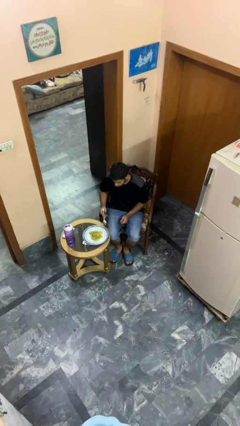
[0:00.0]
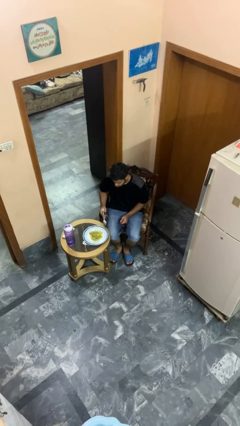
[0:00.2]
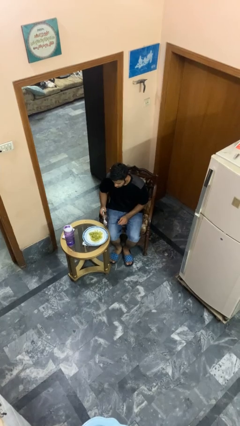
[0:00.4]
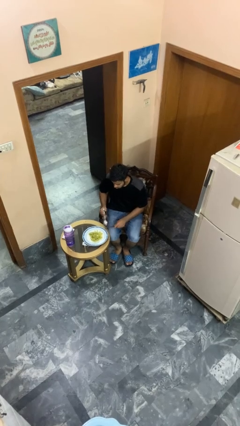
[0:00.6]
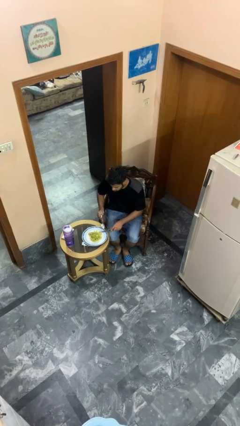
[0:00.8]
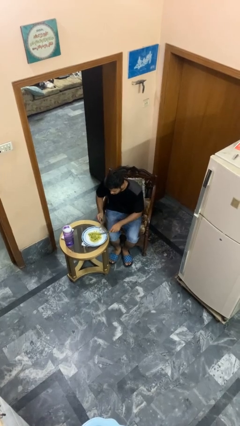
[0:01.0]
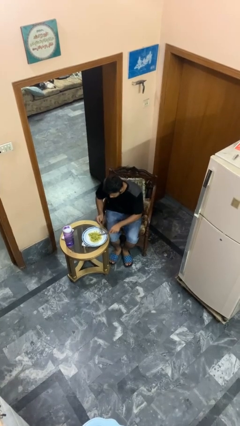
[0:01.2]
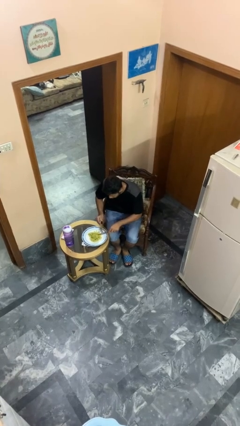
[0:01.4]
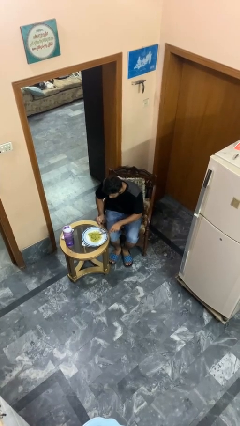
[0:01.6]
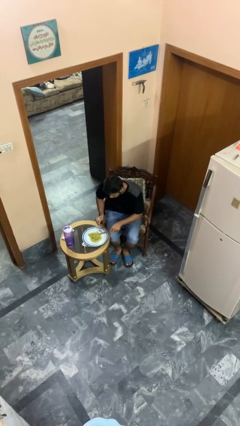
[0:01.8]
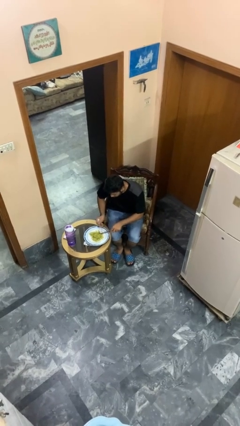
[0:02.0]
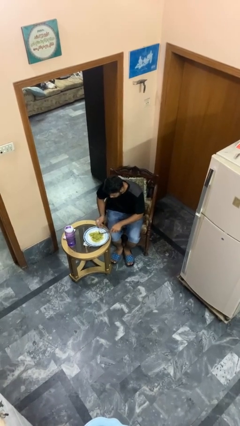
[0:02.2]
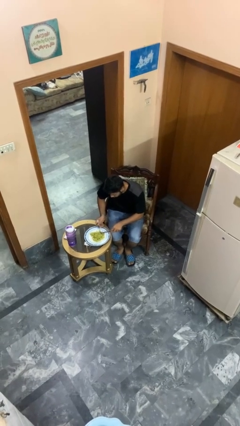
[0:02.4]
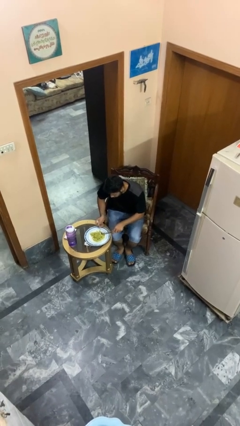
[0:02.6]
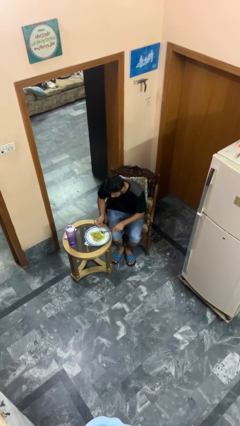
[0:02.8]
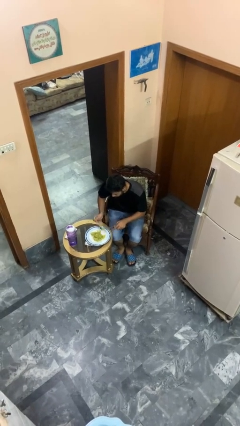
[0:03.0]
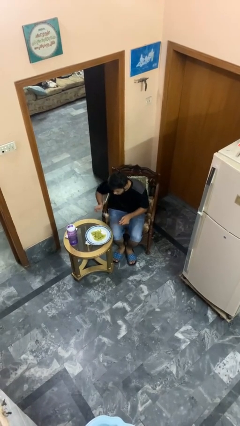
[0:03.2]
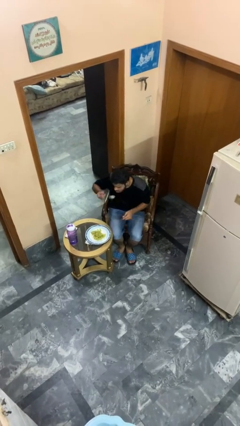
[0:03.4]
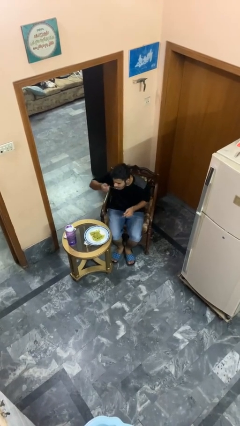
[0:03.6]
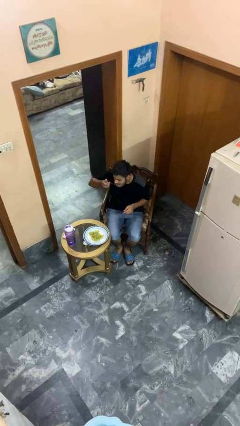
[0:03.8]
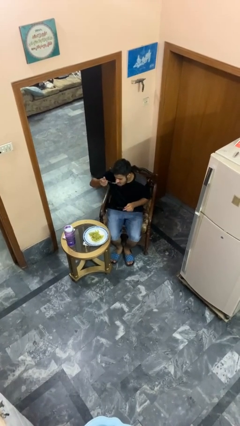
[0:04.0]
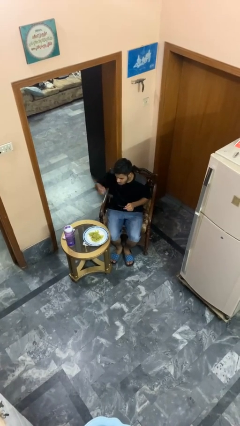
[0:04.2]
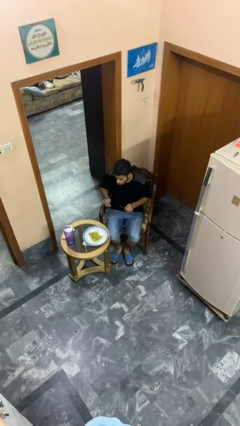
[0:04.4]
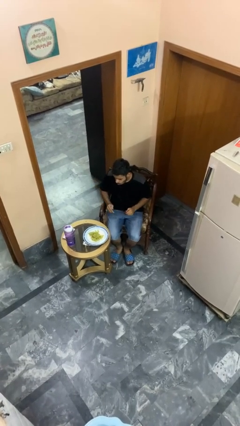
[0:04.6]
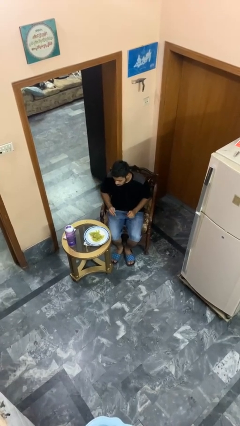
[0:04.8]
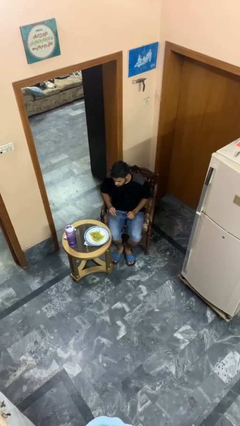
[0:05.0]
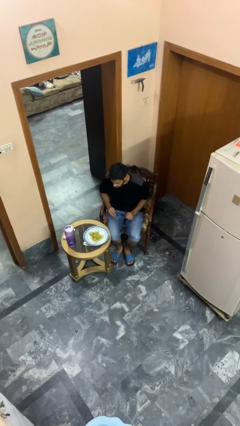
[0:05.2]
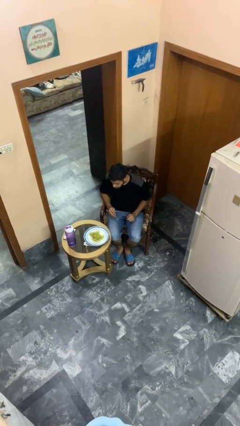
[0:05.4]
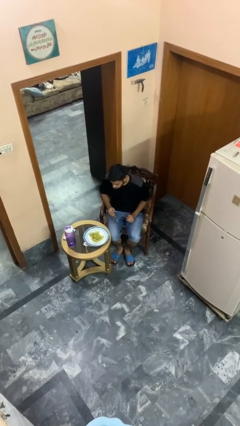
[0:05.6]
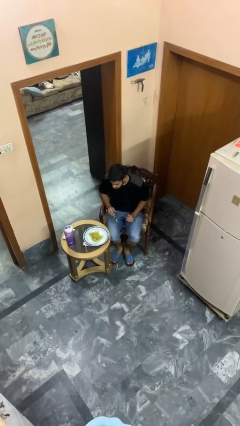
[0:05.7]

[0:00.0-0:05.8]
person eats with utensil

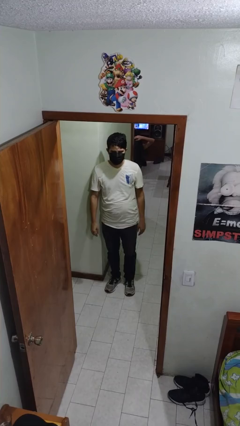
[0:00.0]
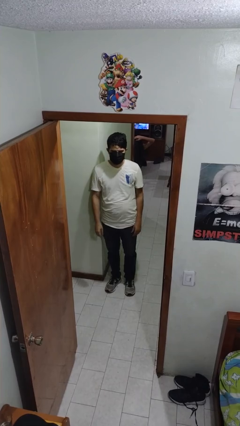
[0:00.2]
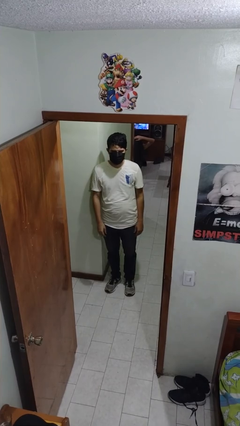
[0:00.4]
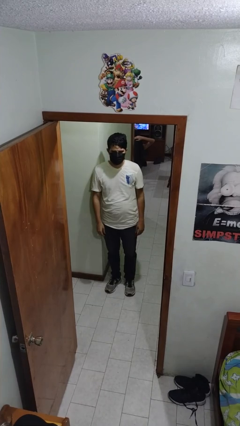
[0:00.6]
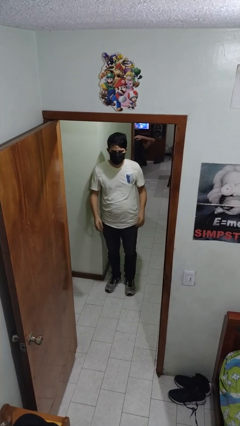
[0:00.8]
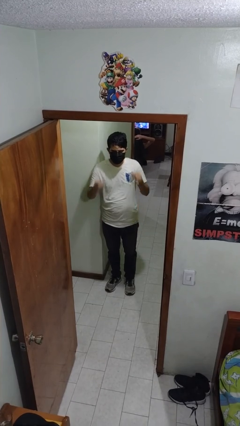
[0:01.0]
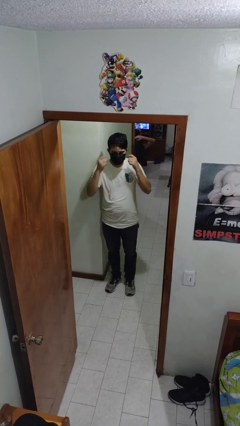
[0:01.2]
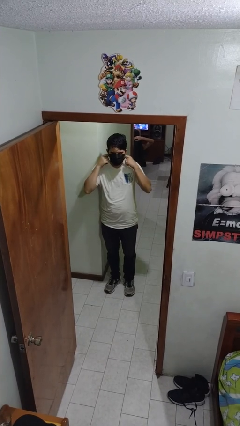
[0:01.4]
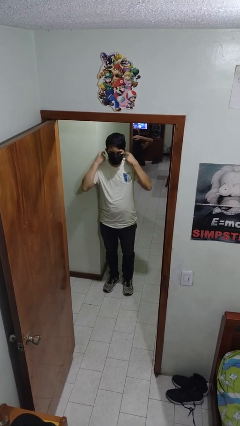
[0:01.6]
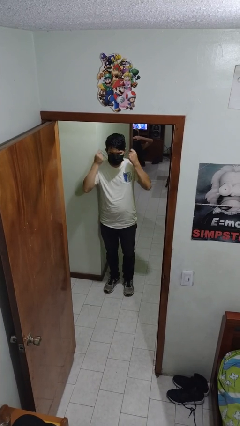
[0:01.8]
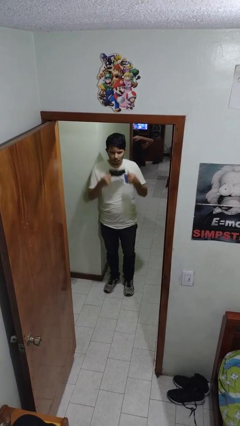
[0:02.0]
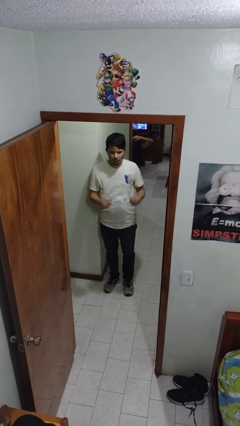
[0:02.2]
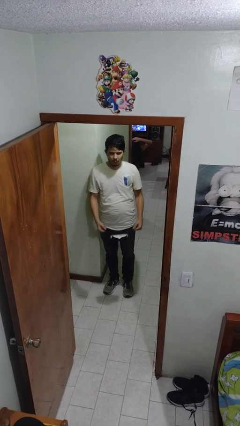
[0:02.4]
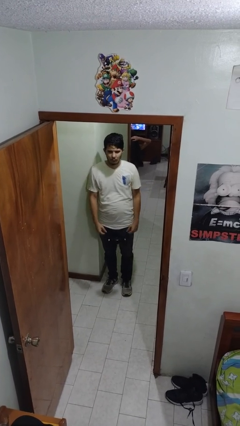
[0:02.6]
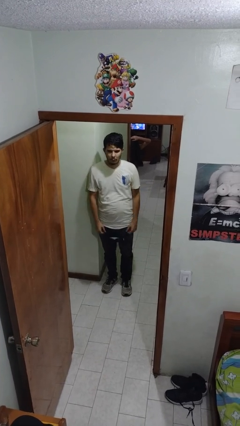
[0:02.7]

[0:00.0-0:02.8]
person takes off facemask

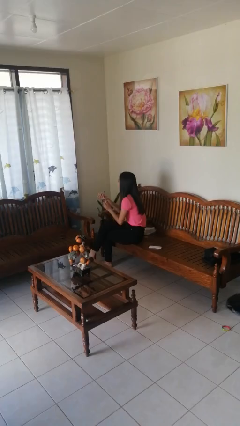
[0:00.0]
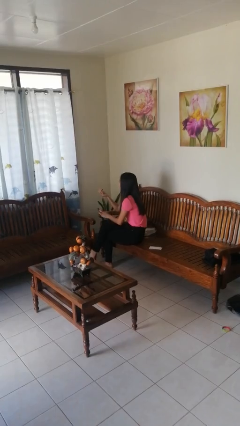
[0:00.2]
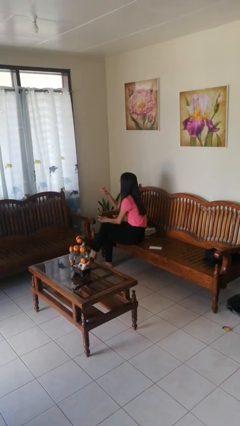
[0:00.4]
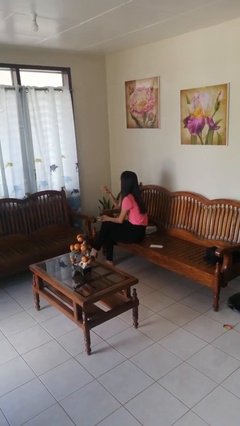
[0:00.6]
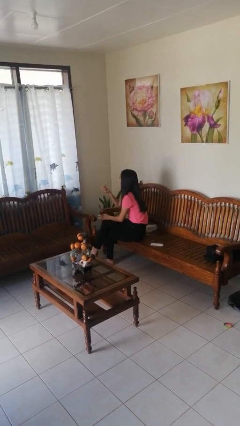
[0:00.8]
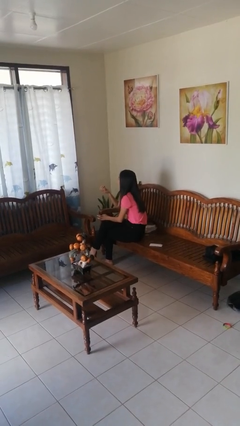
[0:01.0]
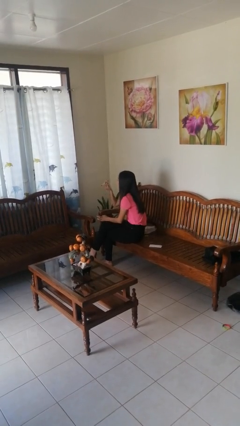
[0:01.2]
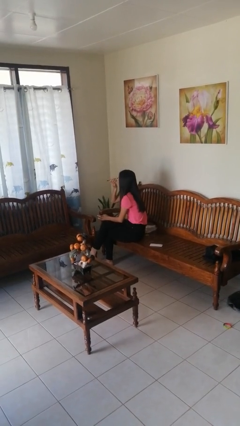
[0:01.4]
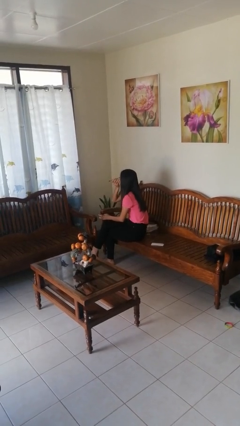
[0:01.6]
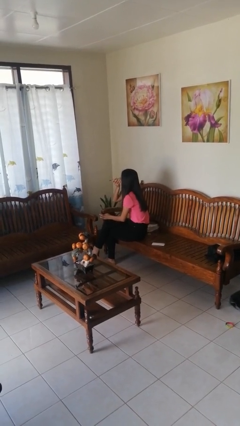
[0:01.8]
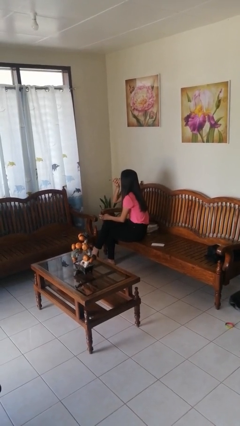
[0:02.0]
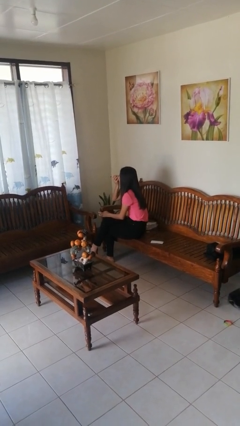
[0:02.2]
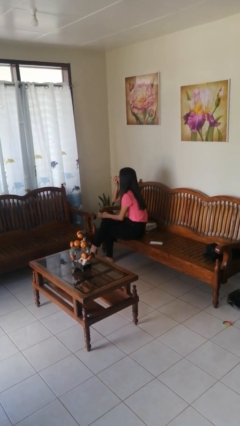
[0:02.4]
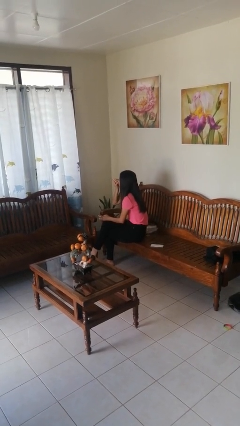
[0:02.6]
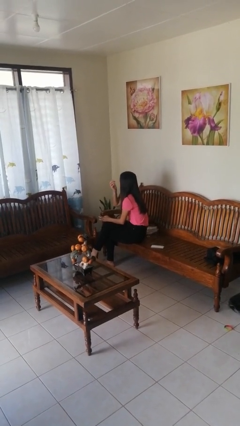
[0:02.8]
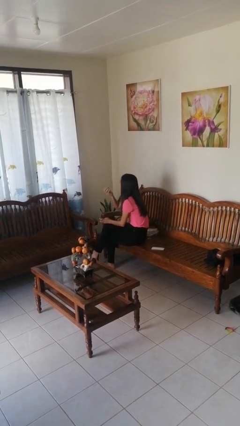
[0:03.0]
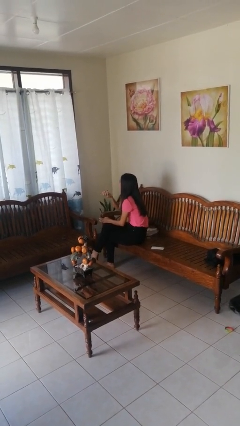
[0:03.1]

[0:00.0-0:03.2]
person applies eye makeup

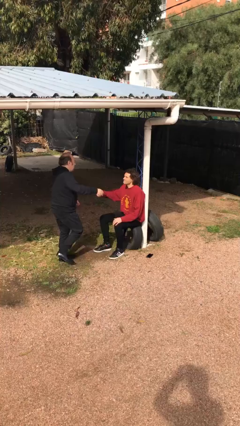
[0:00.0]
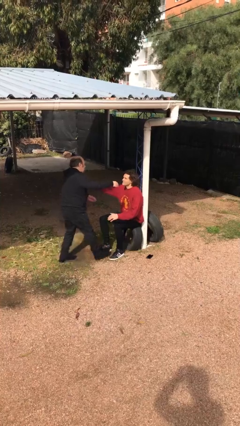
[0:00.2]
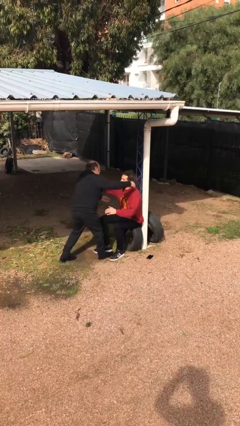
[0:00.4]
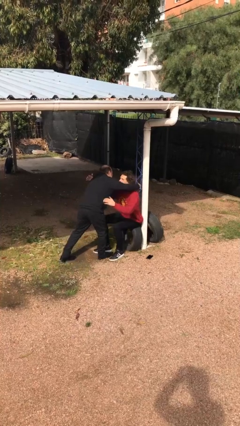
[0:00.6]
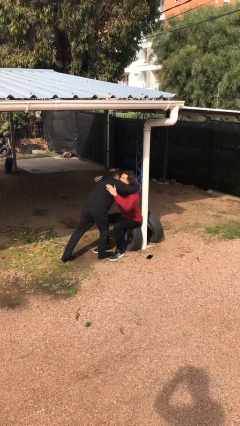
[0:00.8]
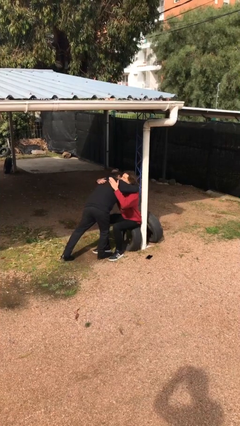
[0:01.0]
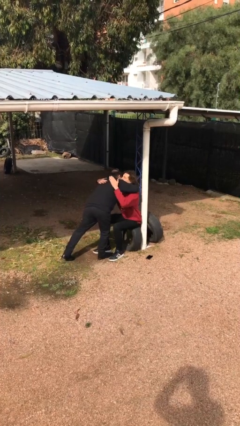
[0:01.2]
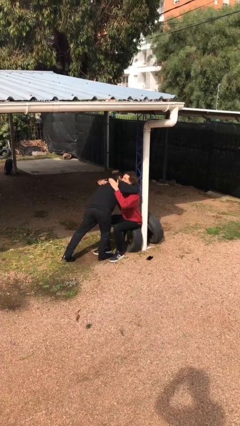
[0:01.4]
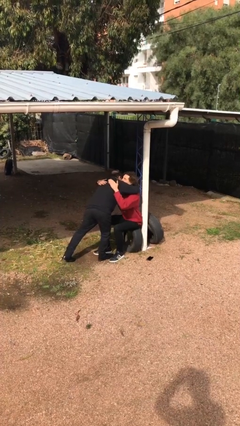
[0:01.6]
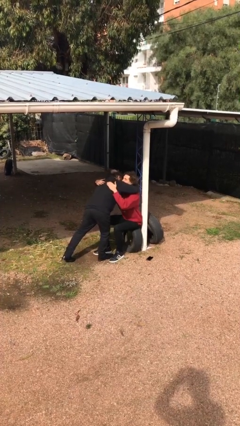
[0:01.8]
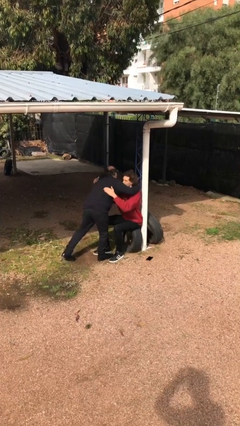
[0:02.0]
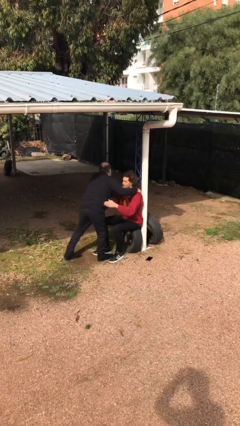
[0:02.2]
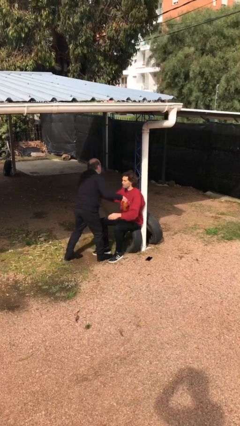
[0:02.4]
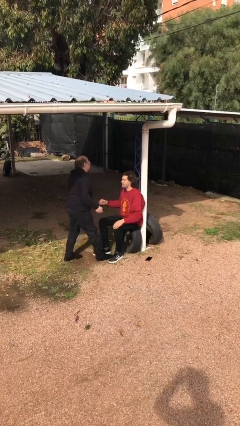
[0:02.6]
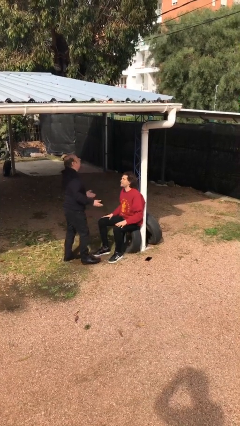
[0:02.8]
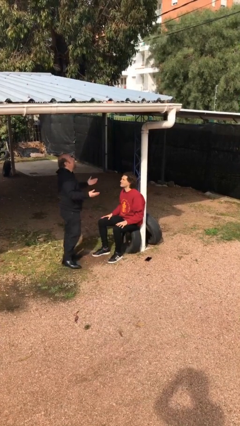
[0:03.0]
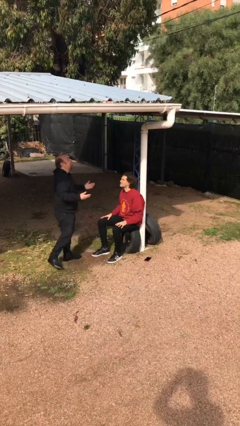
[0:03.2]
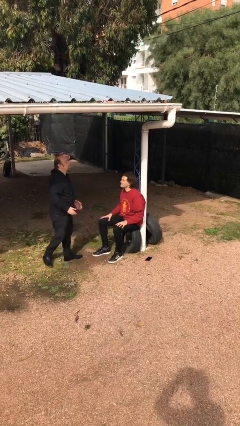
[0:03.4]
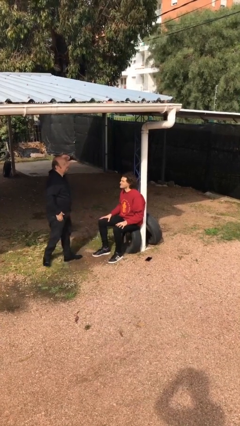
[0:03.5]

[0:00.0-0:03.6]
person embraces person

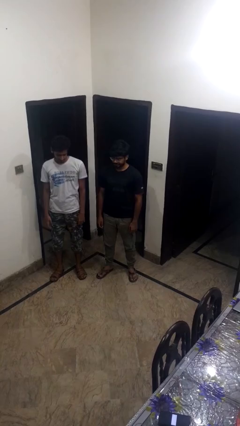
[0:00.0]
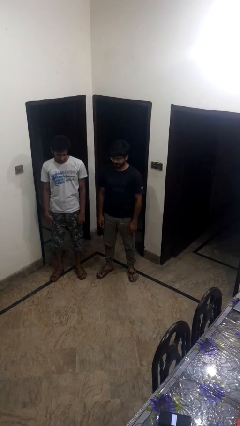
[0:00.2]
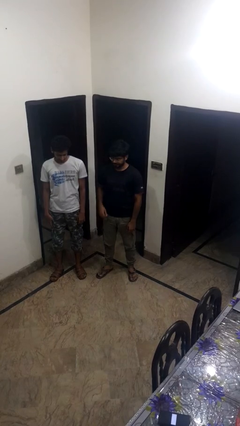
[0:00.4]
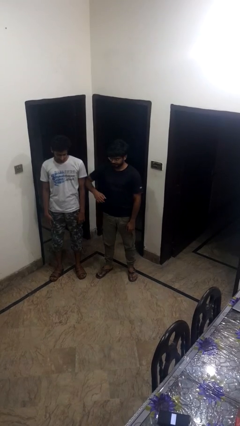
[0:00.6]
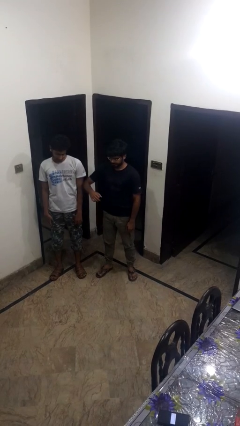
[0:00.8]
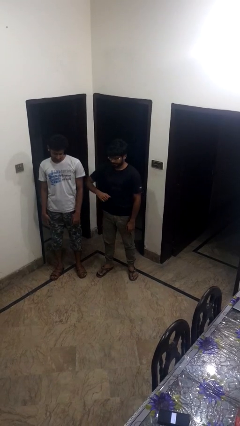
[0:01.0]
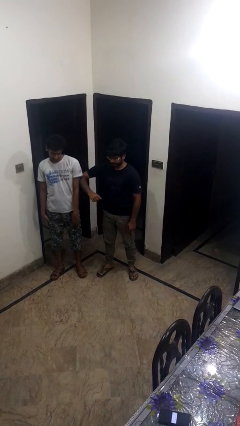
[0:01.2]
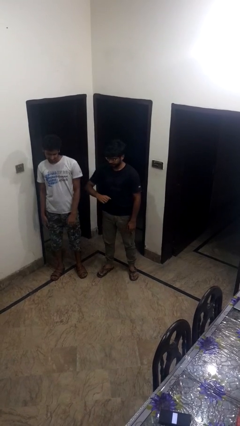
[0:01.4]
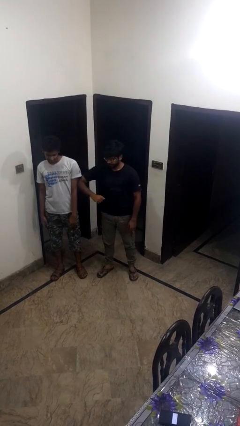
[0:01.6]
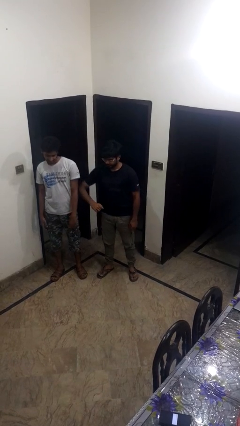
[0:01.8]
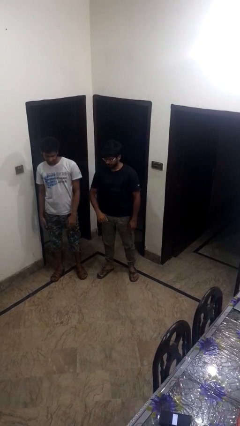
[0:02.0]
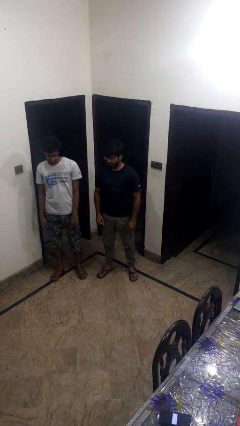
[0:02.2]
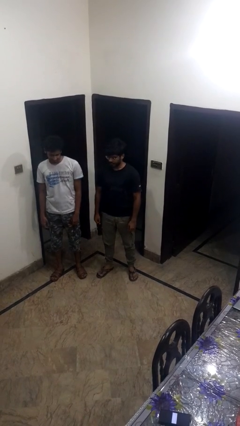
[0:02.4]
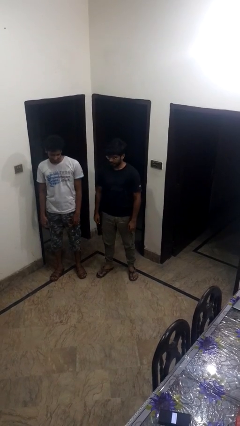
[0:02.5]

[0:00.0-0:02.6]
person nudges person with elbow
